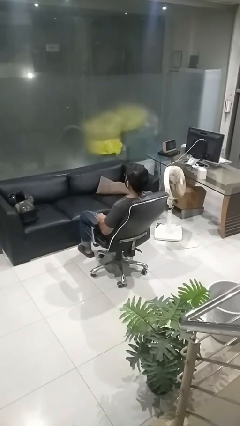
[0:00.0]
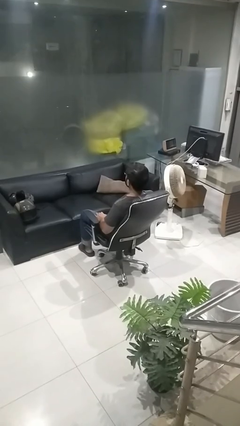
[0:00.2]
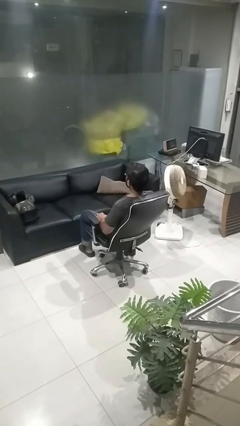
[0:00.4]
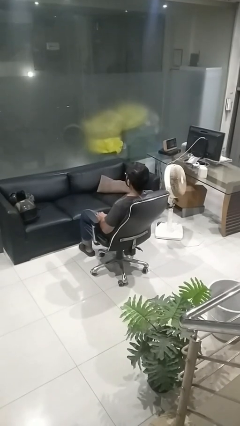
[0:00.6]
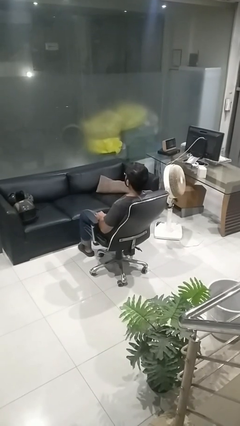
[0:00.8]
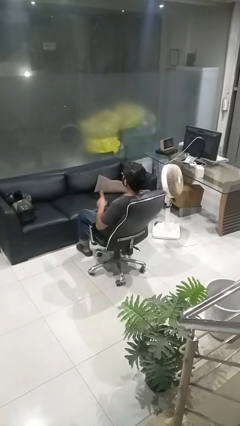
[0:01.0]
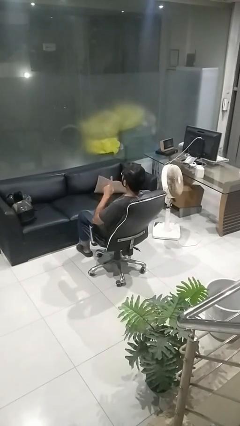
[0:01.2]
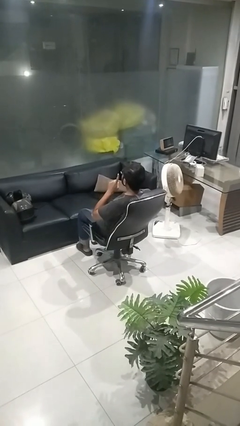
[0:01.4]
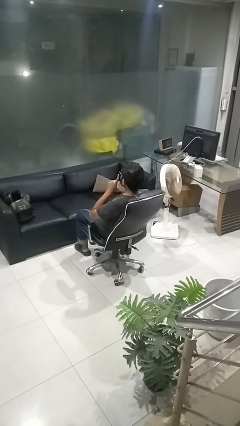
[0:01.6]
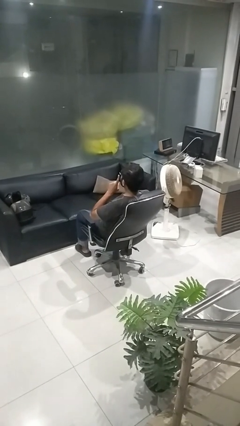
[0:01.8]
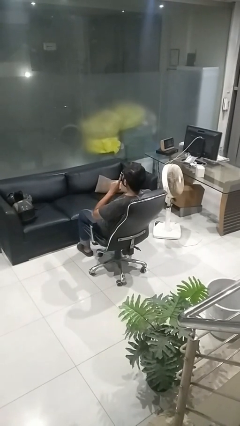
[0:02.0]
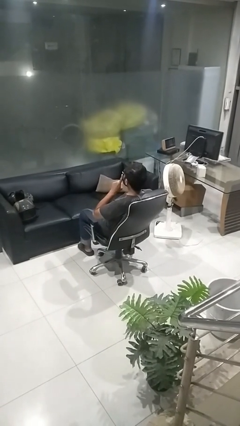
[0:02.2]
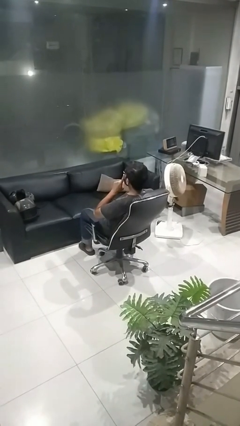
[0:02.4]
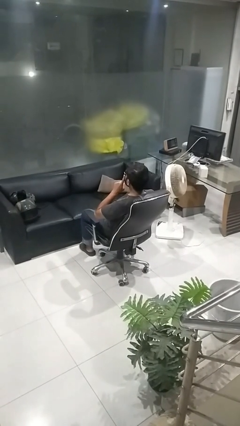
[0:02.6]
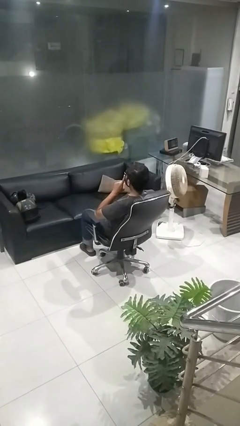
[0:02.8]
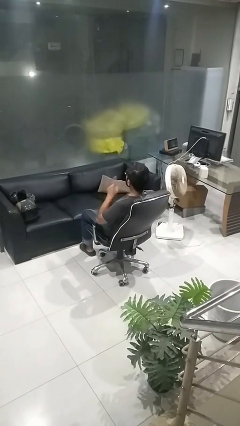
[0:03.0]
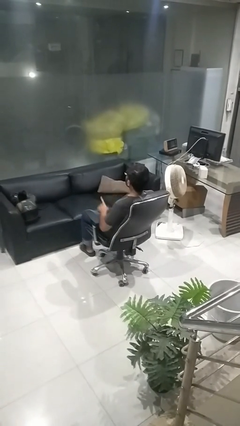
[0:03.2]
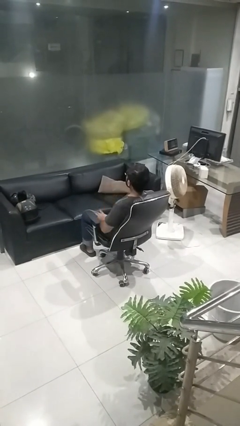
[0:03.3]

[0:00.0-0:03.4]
person gestures be quiet

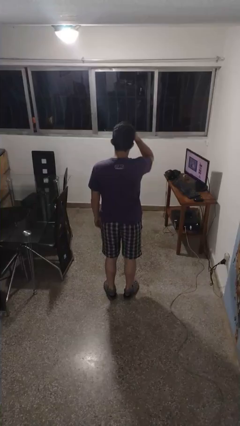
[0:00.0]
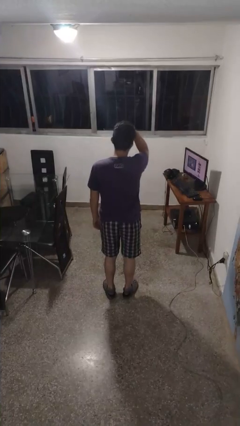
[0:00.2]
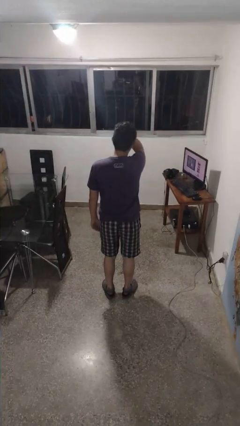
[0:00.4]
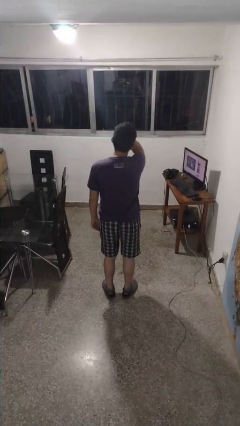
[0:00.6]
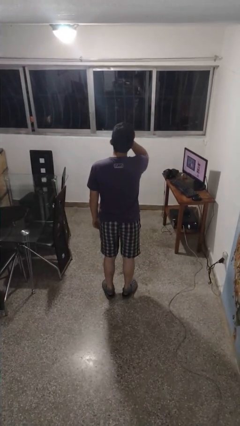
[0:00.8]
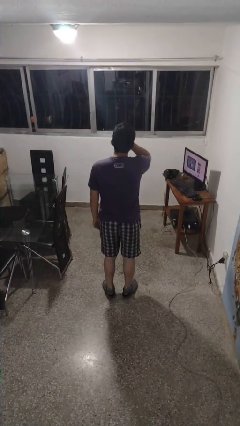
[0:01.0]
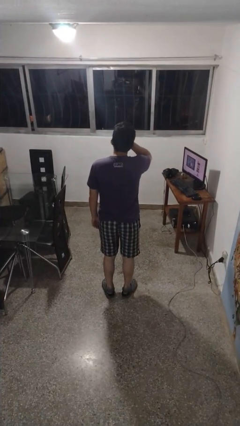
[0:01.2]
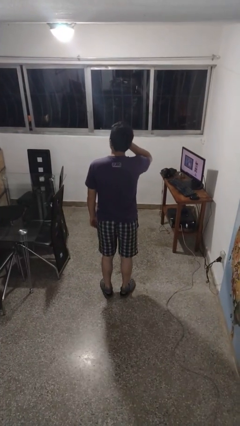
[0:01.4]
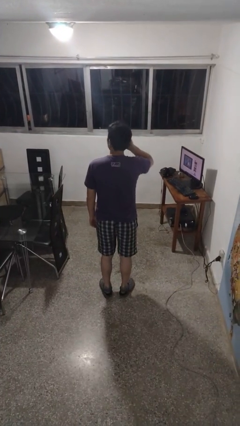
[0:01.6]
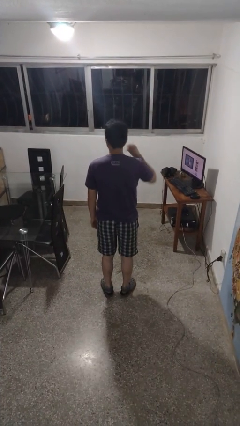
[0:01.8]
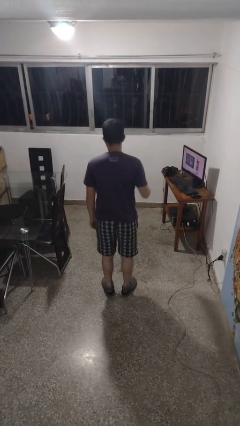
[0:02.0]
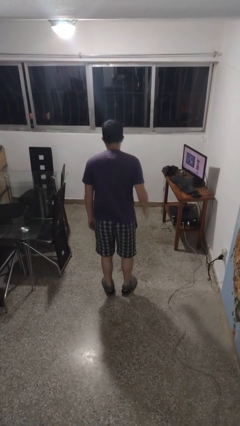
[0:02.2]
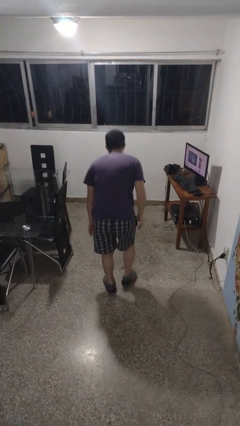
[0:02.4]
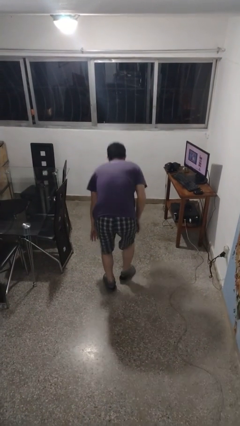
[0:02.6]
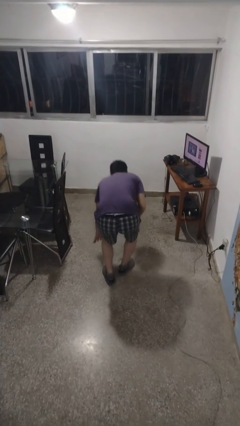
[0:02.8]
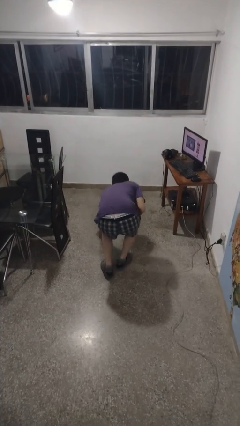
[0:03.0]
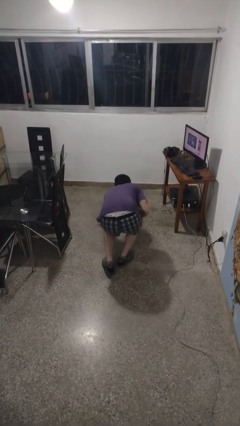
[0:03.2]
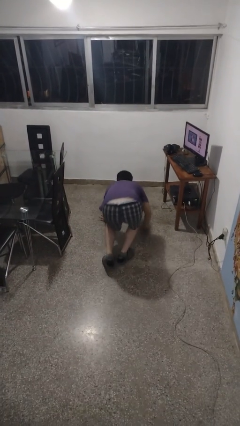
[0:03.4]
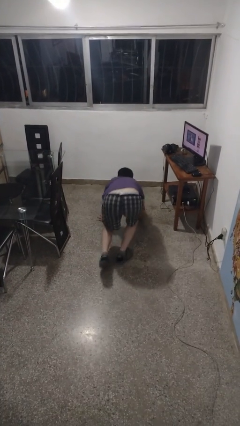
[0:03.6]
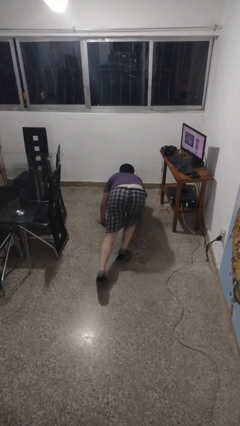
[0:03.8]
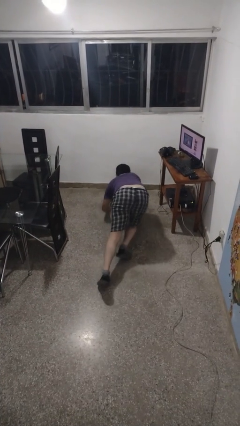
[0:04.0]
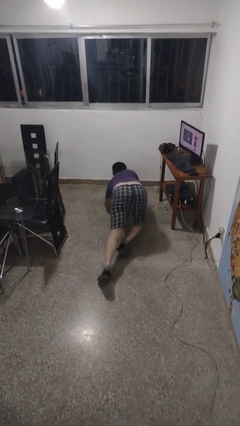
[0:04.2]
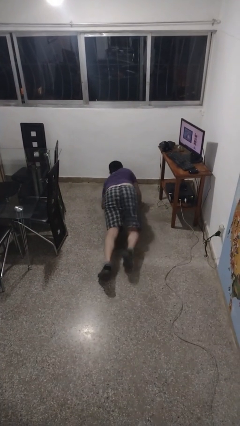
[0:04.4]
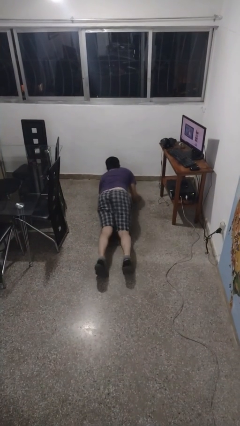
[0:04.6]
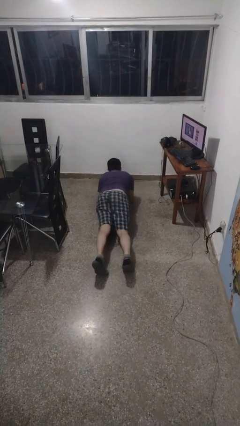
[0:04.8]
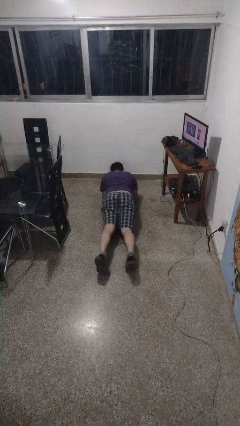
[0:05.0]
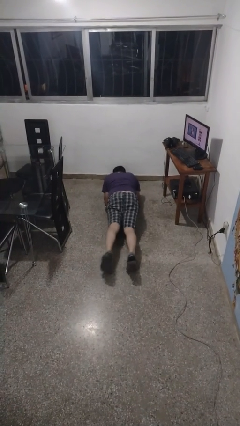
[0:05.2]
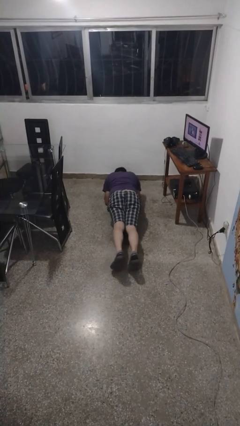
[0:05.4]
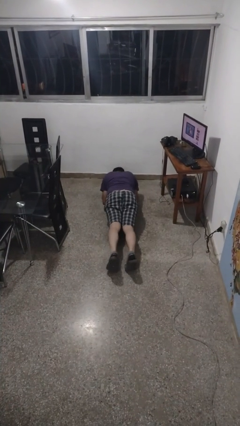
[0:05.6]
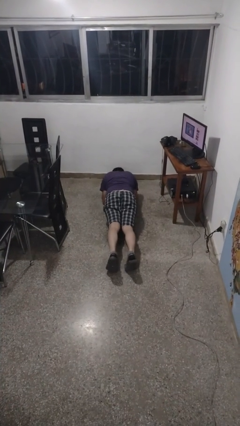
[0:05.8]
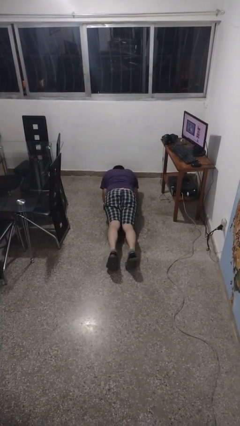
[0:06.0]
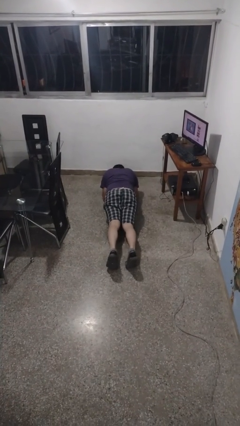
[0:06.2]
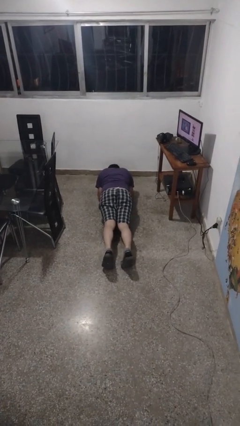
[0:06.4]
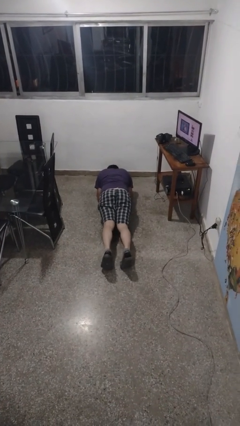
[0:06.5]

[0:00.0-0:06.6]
person exercises with plank

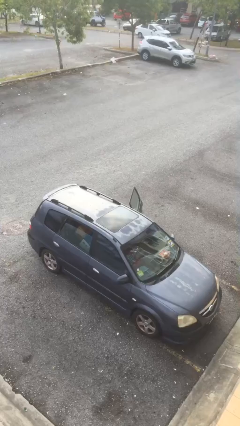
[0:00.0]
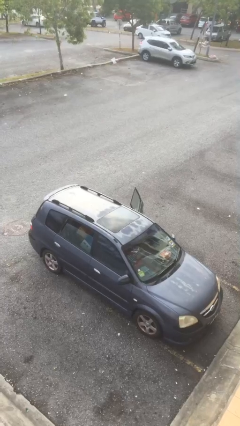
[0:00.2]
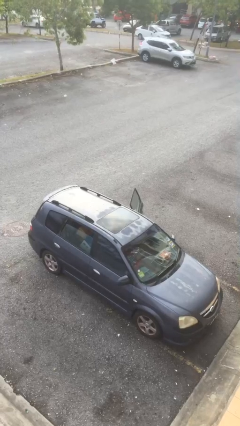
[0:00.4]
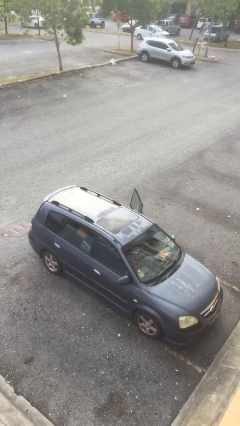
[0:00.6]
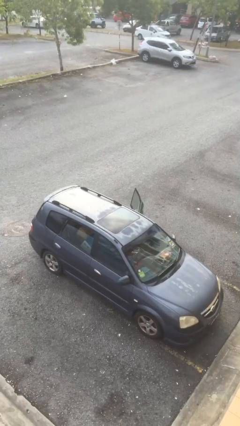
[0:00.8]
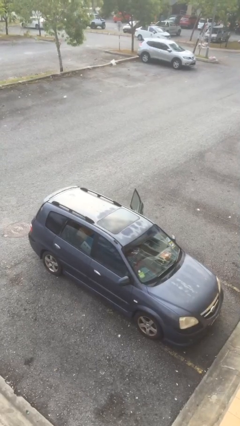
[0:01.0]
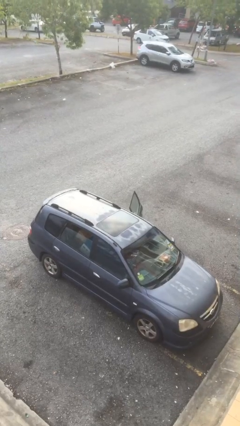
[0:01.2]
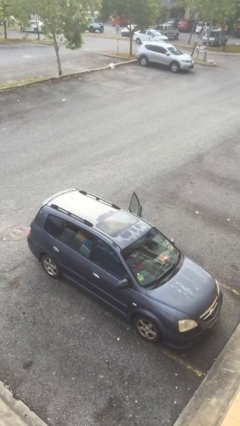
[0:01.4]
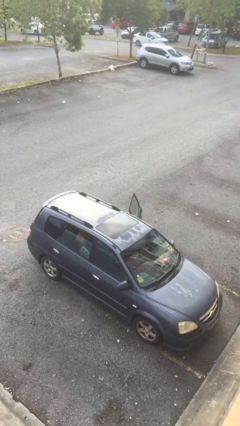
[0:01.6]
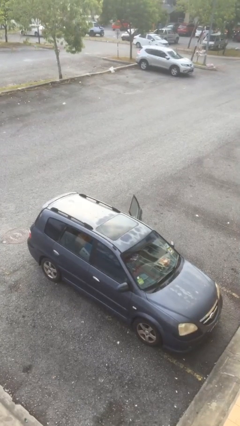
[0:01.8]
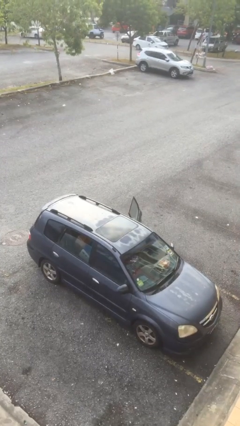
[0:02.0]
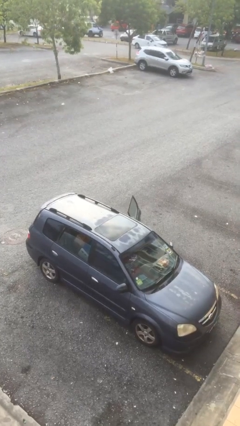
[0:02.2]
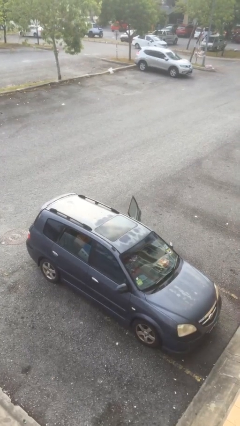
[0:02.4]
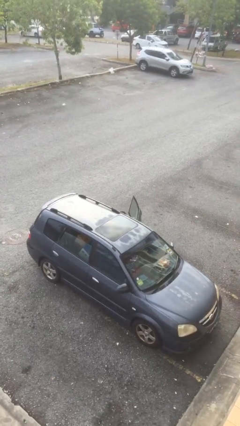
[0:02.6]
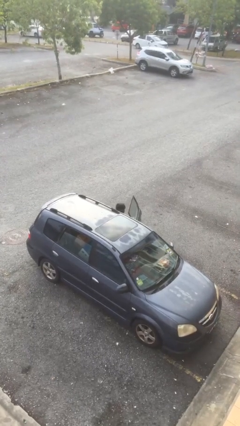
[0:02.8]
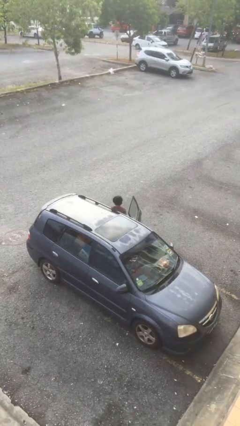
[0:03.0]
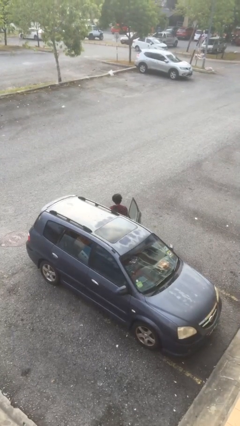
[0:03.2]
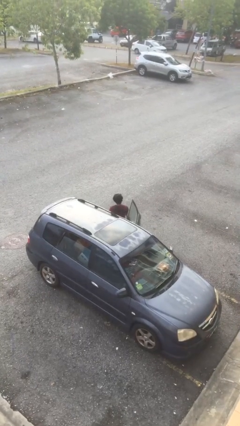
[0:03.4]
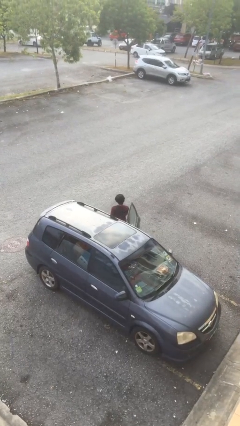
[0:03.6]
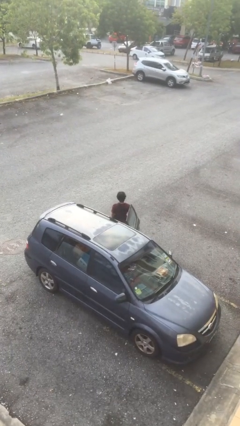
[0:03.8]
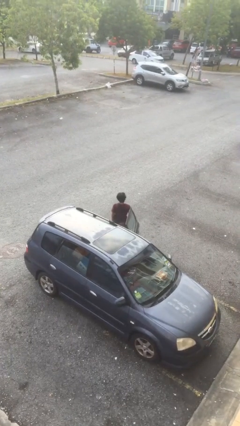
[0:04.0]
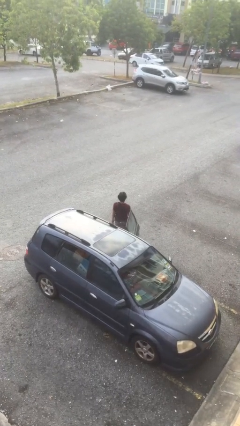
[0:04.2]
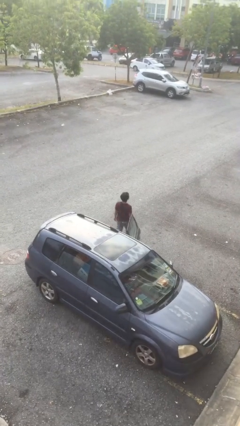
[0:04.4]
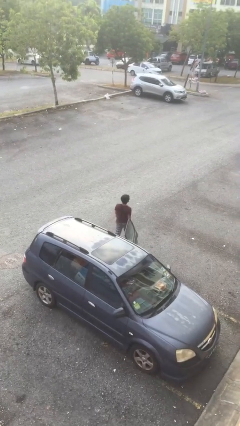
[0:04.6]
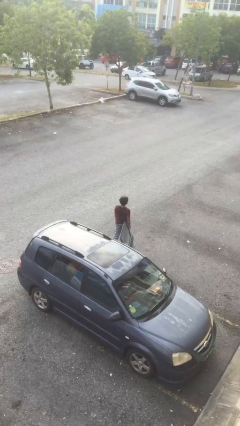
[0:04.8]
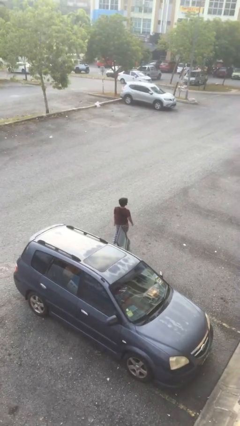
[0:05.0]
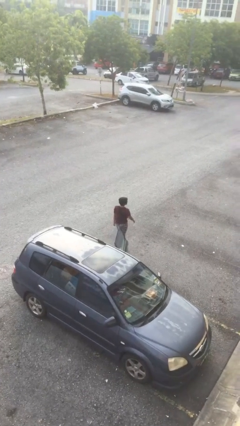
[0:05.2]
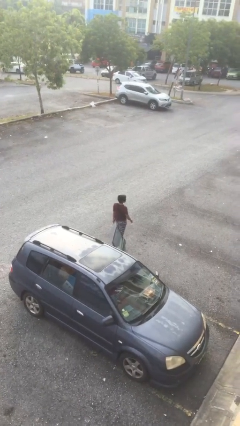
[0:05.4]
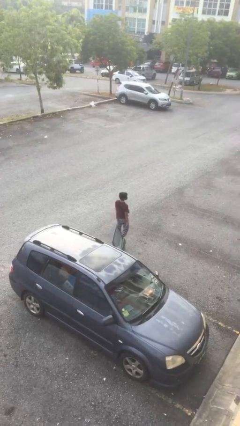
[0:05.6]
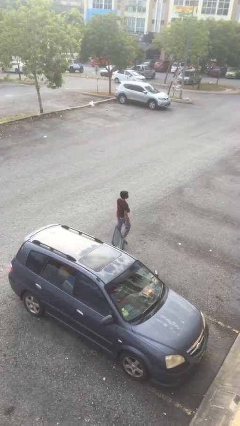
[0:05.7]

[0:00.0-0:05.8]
person exits car

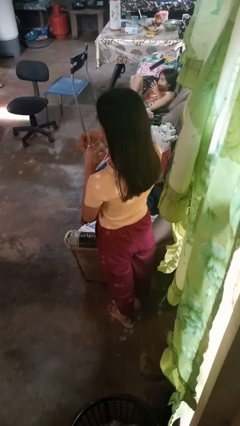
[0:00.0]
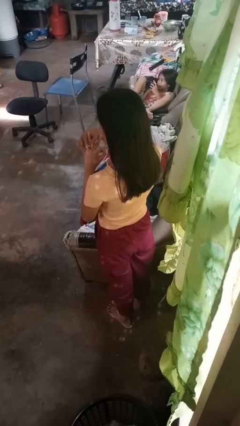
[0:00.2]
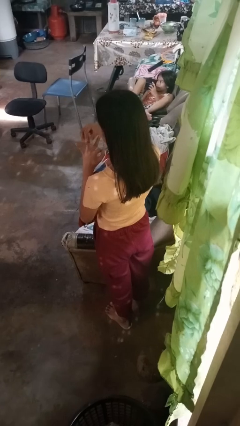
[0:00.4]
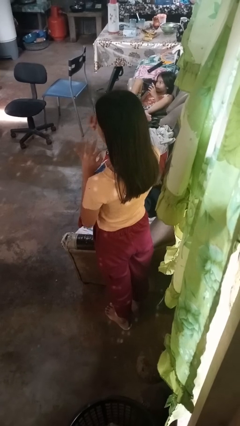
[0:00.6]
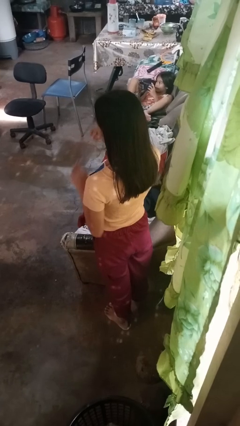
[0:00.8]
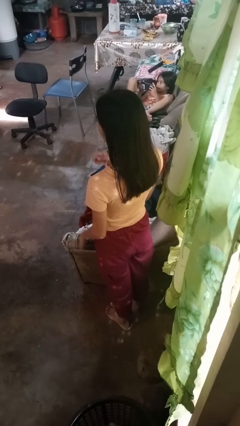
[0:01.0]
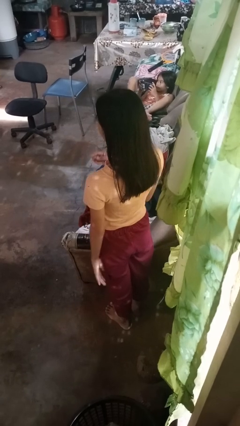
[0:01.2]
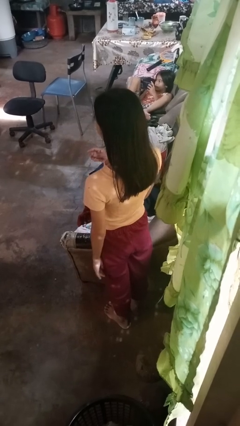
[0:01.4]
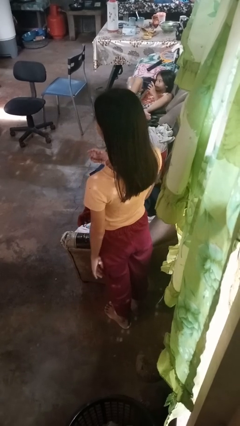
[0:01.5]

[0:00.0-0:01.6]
person takes off ring
